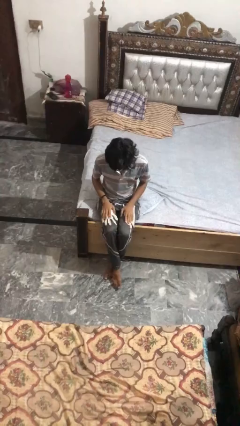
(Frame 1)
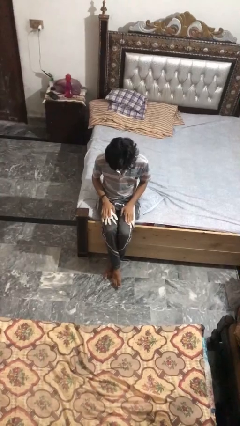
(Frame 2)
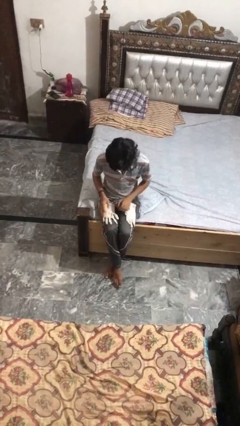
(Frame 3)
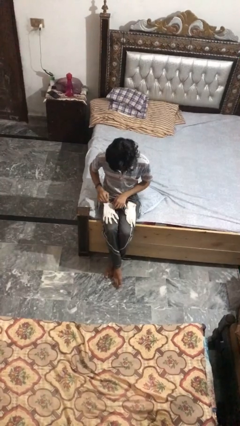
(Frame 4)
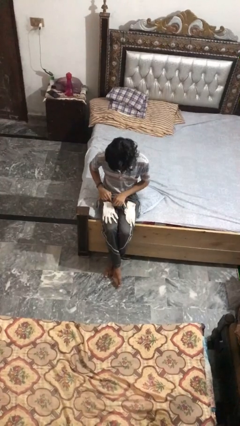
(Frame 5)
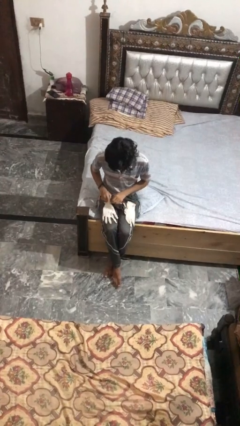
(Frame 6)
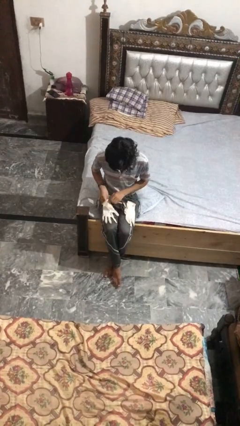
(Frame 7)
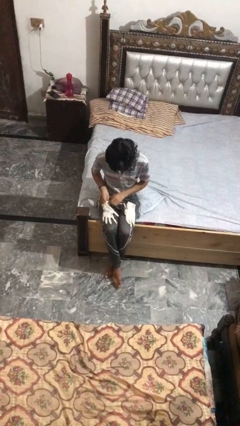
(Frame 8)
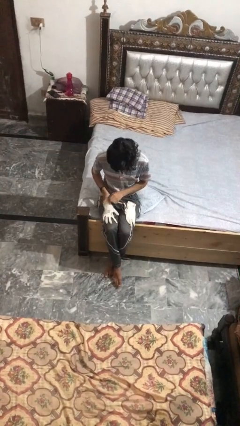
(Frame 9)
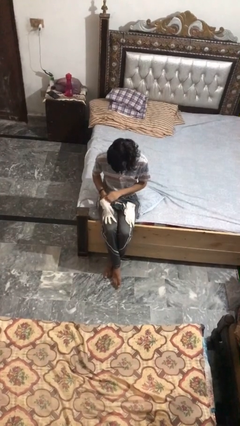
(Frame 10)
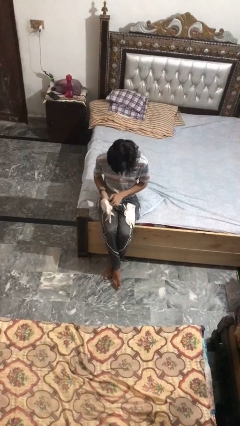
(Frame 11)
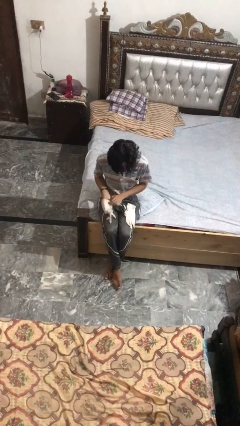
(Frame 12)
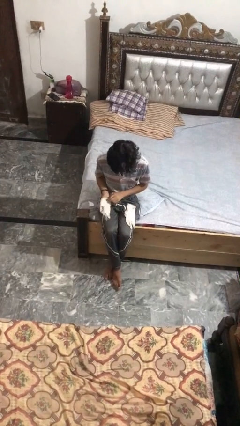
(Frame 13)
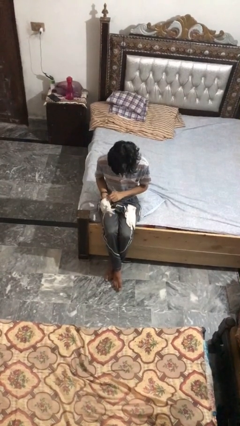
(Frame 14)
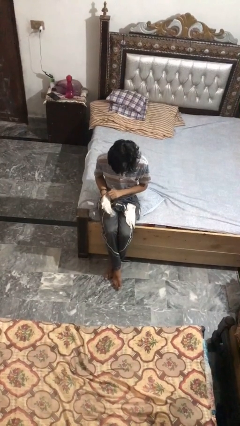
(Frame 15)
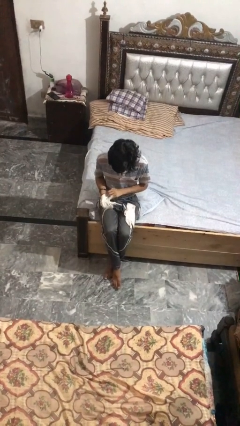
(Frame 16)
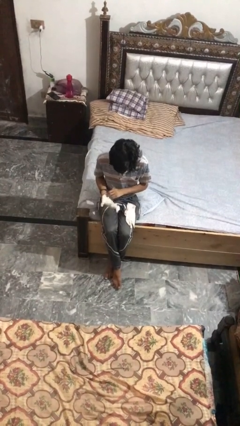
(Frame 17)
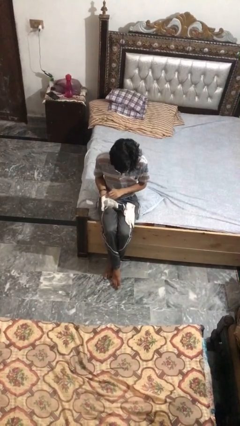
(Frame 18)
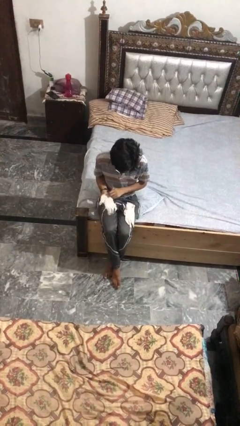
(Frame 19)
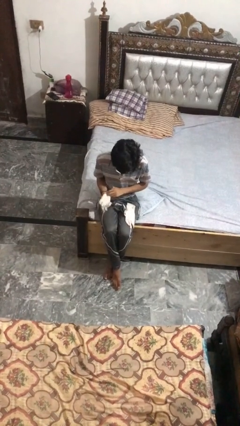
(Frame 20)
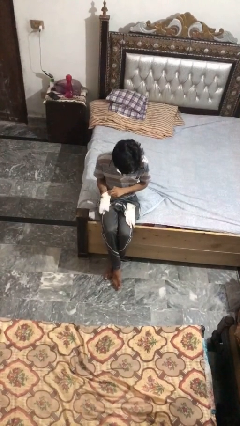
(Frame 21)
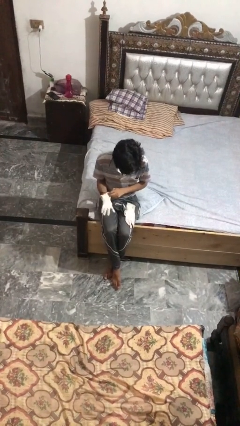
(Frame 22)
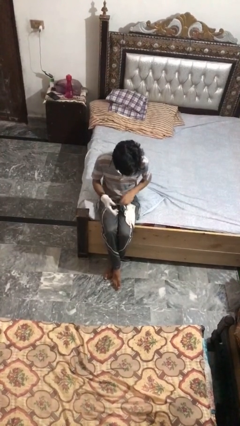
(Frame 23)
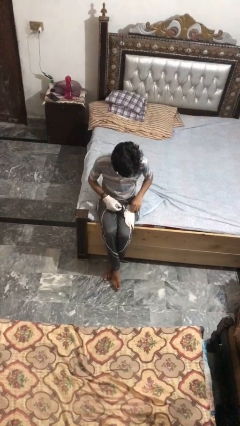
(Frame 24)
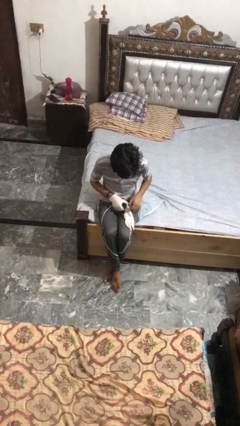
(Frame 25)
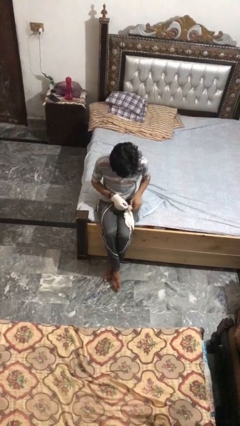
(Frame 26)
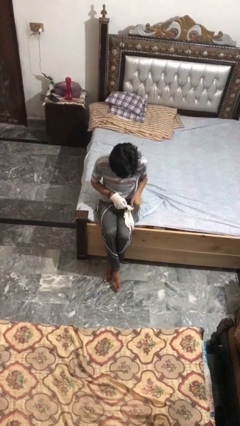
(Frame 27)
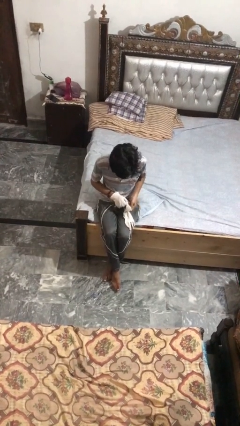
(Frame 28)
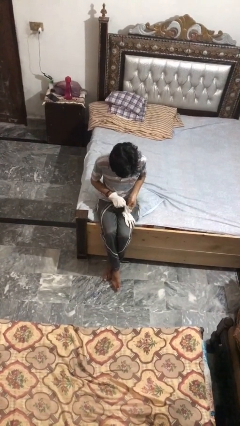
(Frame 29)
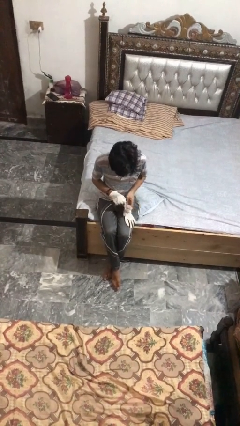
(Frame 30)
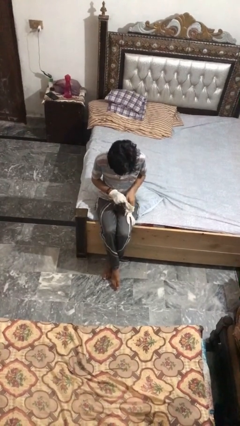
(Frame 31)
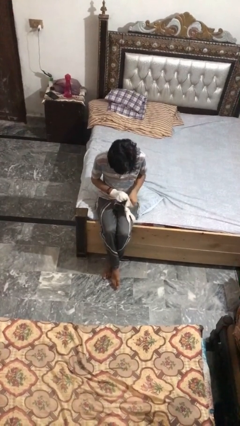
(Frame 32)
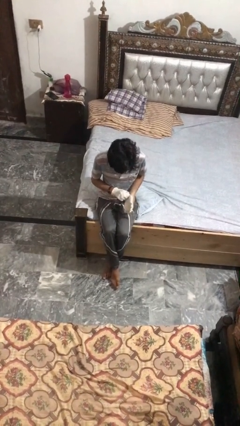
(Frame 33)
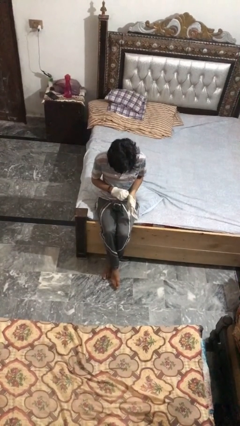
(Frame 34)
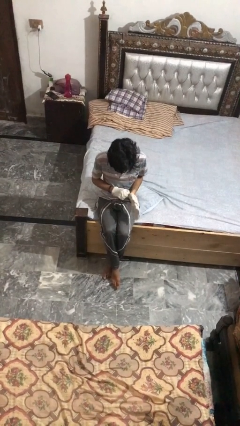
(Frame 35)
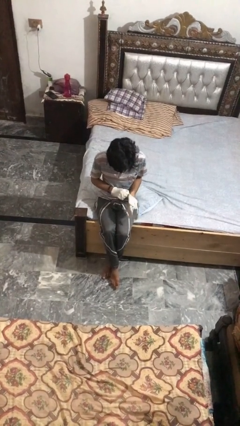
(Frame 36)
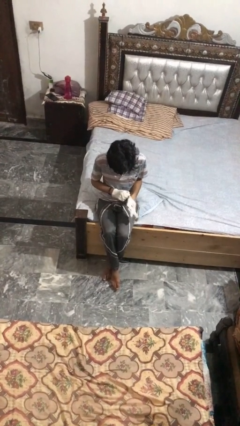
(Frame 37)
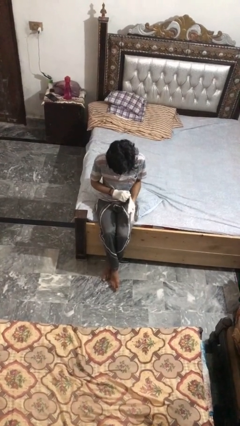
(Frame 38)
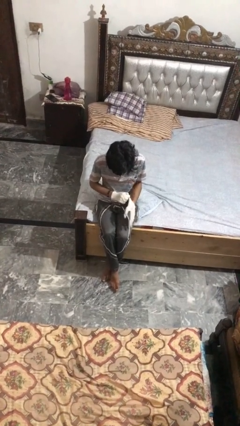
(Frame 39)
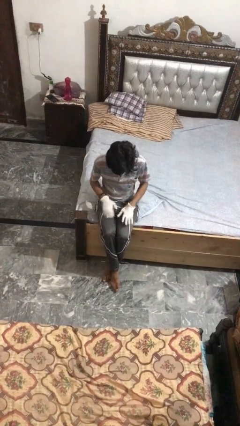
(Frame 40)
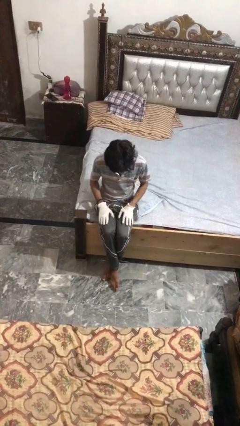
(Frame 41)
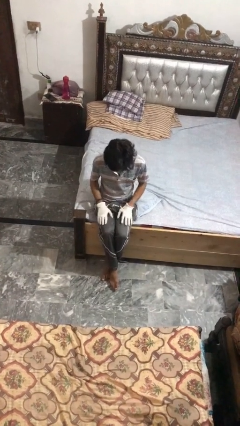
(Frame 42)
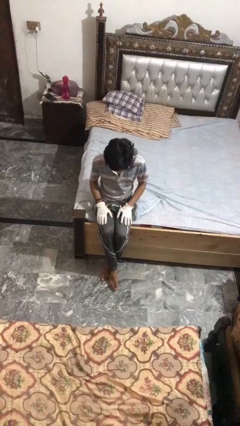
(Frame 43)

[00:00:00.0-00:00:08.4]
person puts on gloves

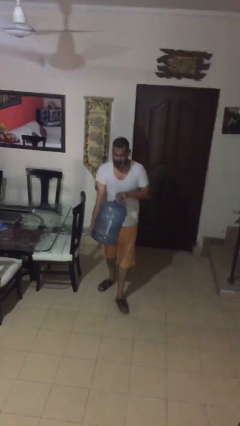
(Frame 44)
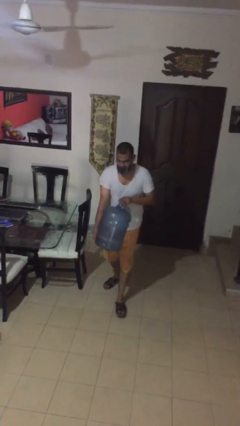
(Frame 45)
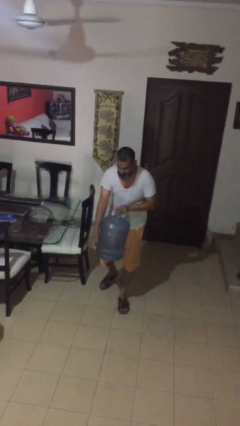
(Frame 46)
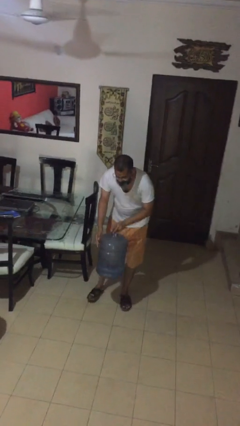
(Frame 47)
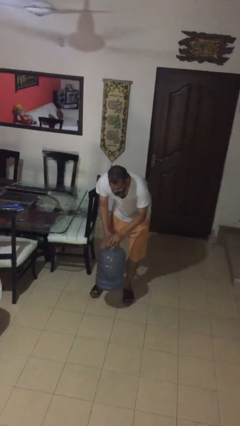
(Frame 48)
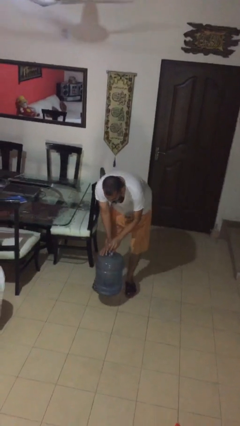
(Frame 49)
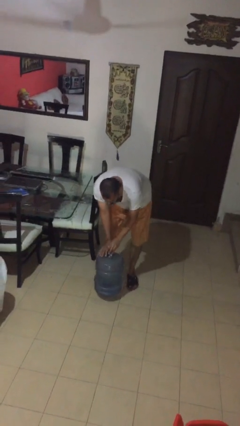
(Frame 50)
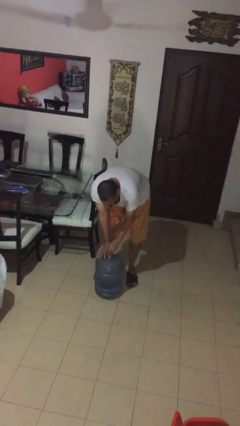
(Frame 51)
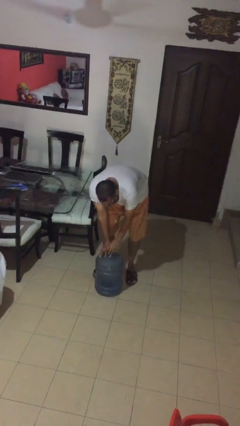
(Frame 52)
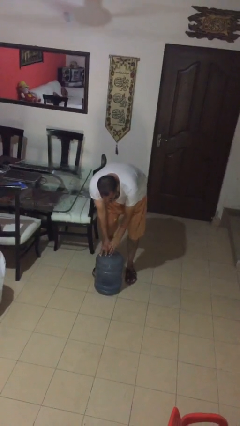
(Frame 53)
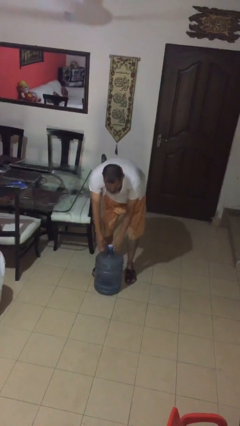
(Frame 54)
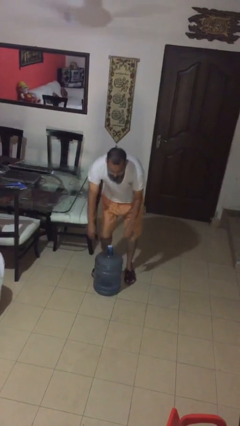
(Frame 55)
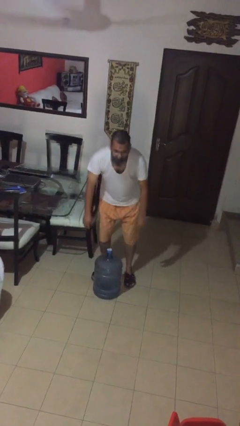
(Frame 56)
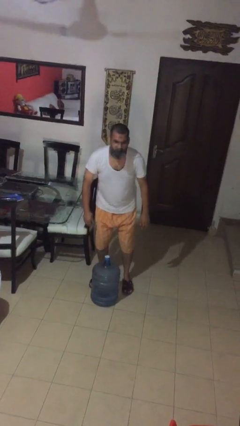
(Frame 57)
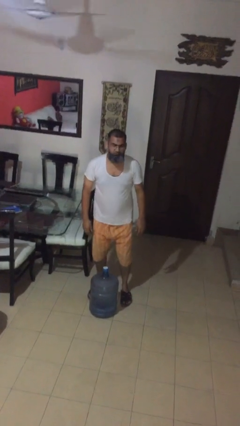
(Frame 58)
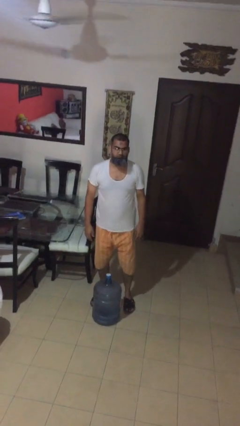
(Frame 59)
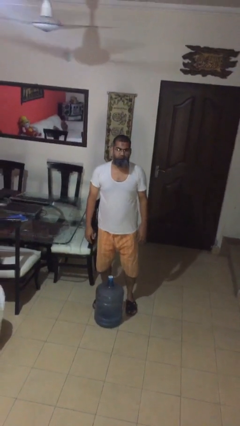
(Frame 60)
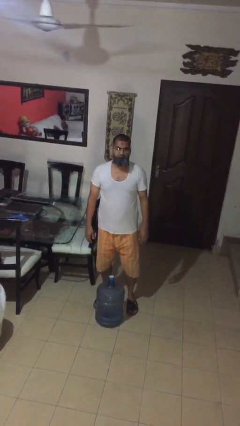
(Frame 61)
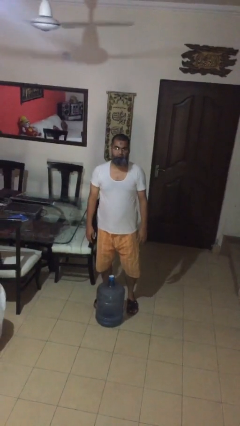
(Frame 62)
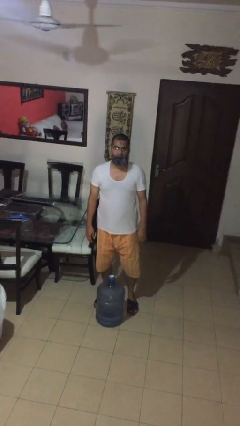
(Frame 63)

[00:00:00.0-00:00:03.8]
person puts down object on floor

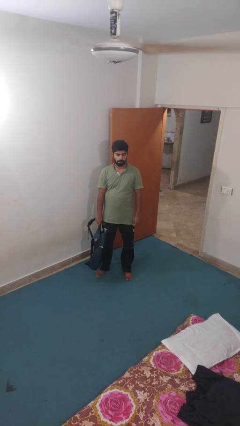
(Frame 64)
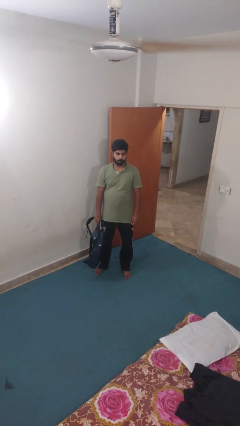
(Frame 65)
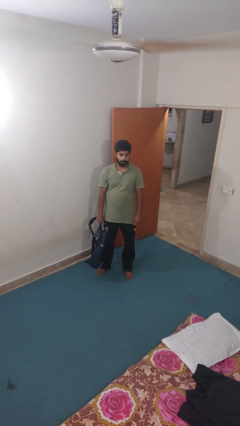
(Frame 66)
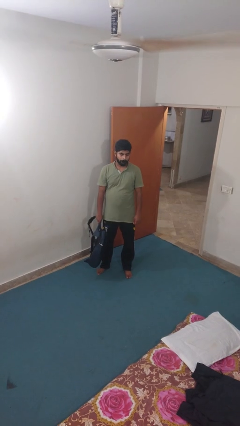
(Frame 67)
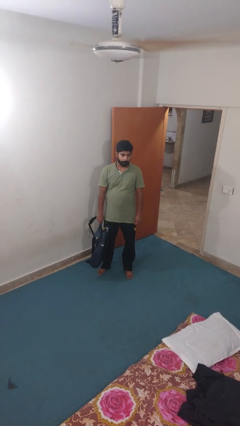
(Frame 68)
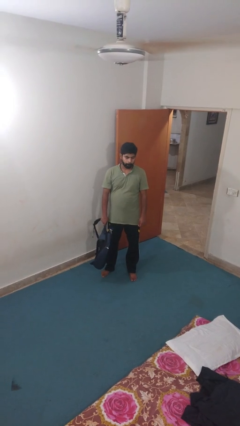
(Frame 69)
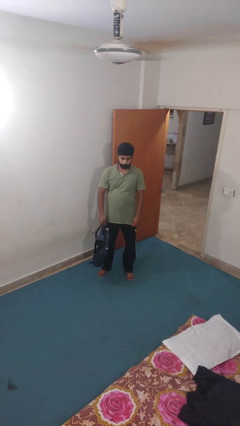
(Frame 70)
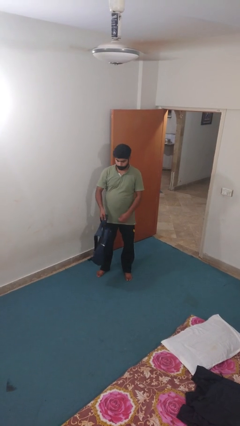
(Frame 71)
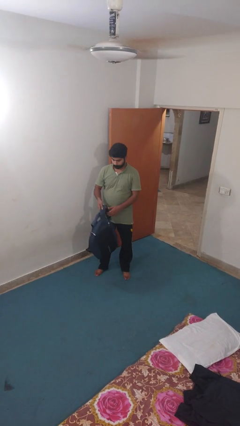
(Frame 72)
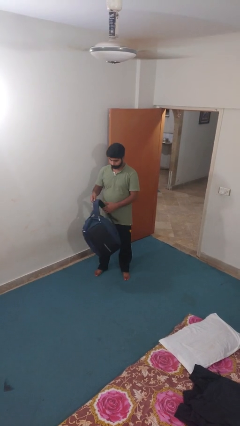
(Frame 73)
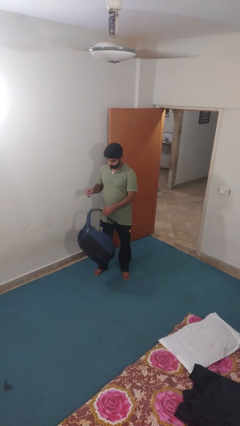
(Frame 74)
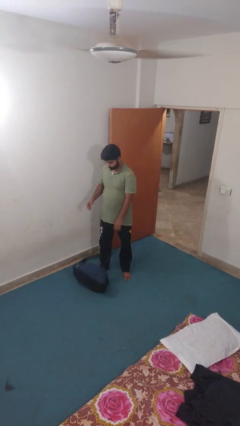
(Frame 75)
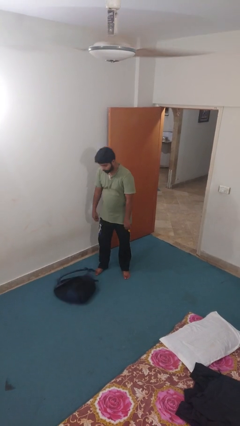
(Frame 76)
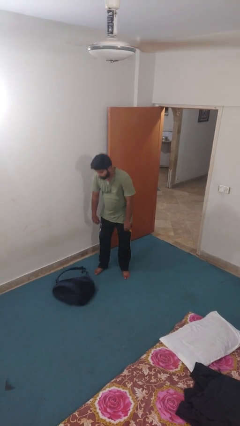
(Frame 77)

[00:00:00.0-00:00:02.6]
person drops object

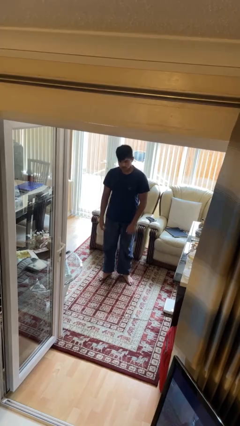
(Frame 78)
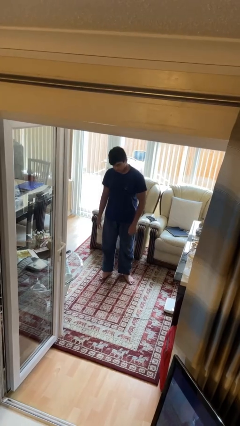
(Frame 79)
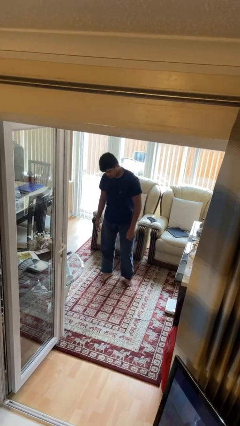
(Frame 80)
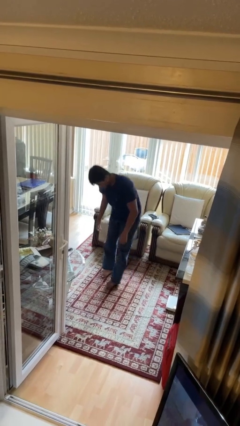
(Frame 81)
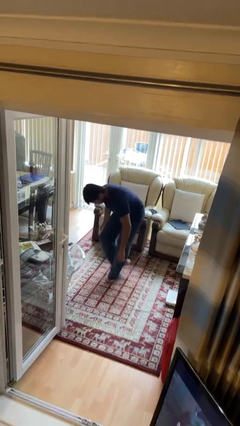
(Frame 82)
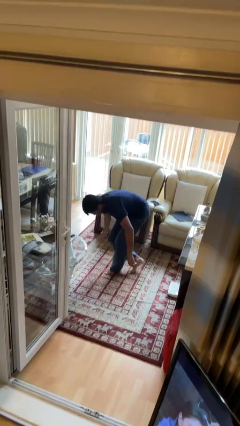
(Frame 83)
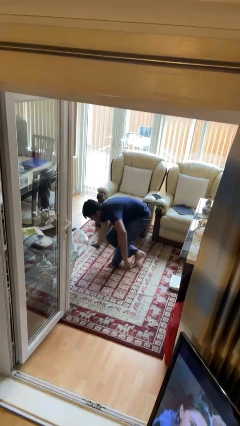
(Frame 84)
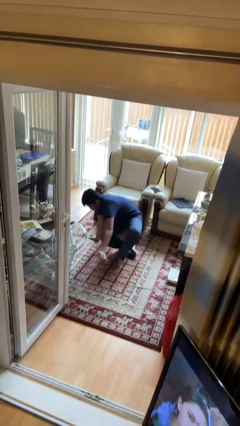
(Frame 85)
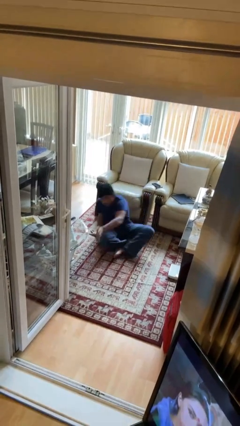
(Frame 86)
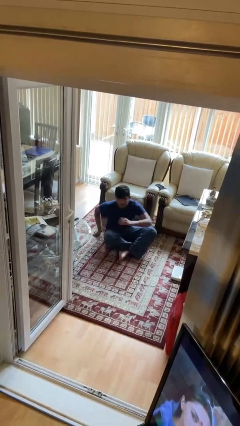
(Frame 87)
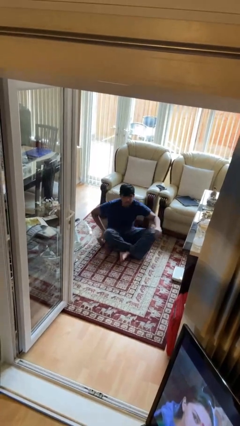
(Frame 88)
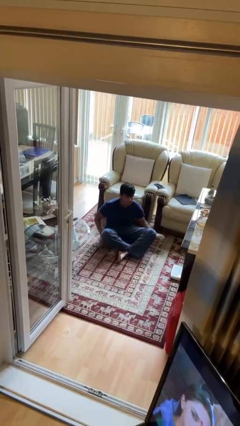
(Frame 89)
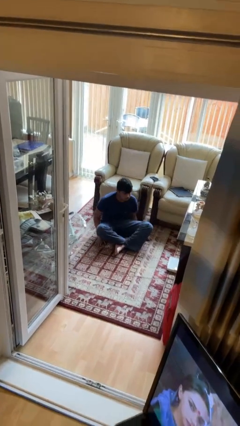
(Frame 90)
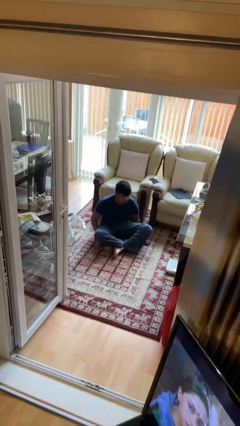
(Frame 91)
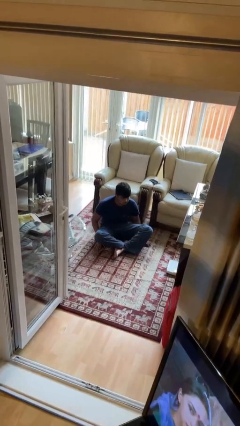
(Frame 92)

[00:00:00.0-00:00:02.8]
person sits crisscross
